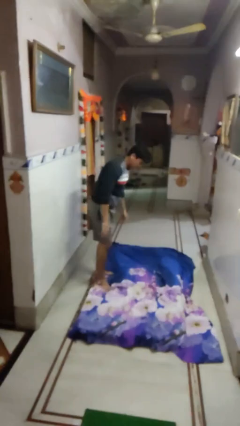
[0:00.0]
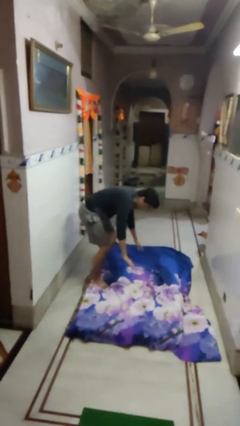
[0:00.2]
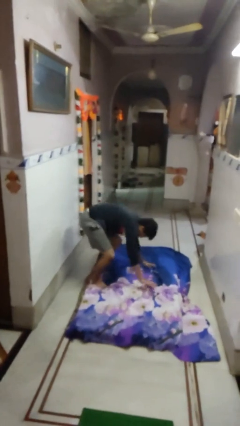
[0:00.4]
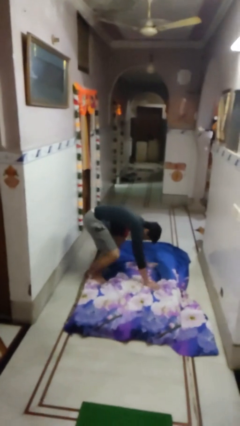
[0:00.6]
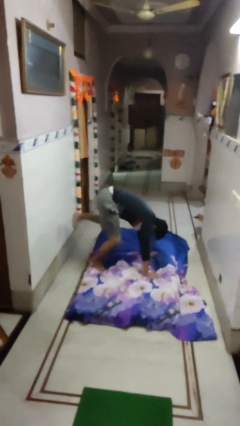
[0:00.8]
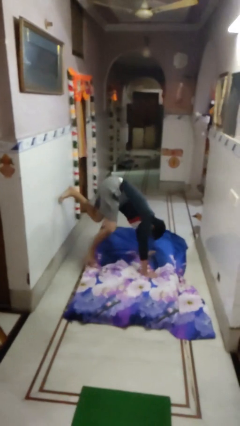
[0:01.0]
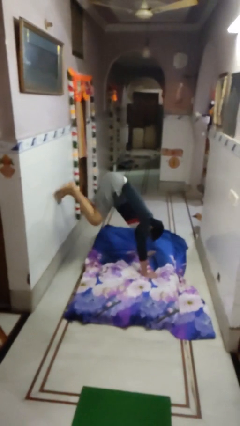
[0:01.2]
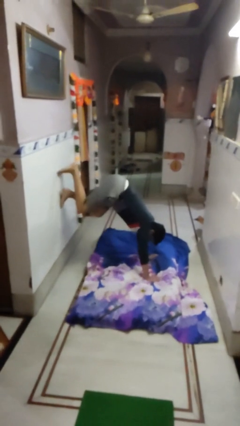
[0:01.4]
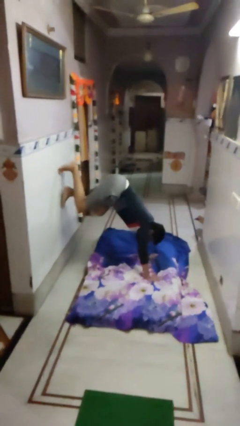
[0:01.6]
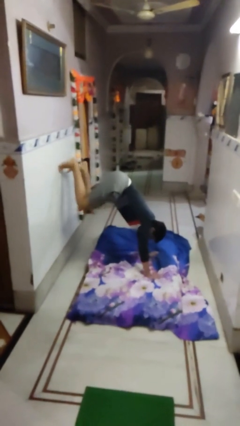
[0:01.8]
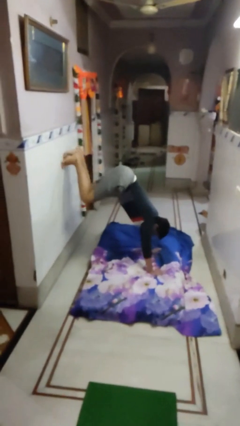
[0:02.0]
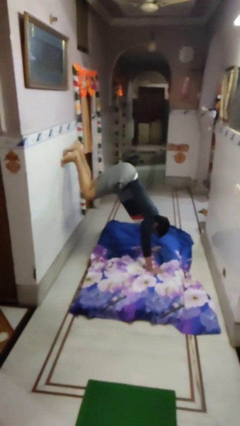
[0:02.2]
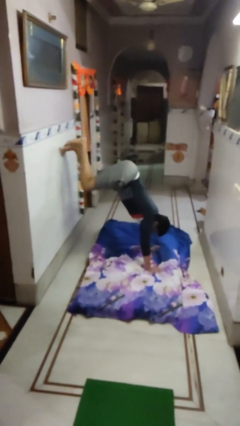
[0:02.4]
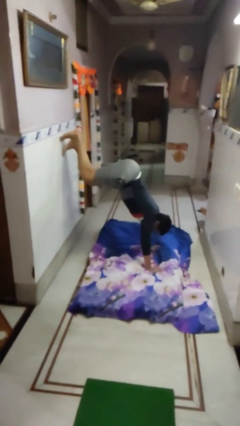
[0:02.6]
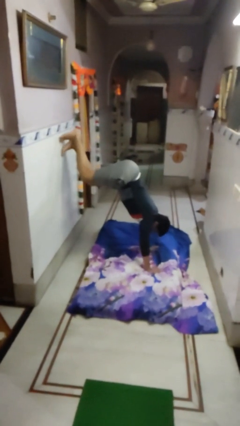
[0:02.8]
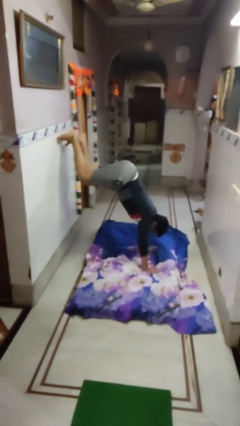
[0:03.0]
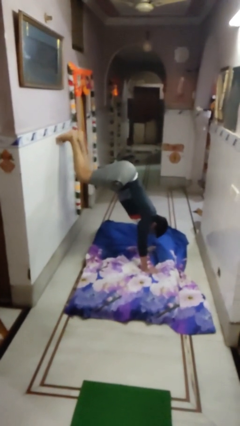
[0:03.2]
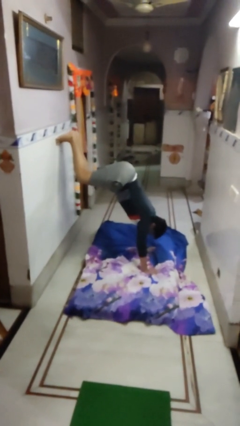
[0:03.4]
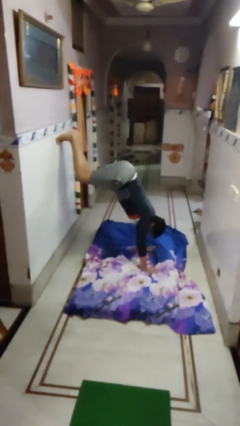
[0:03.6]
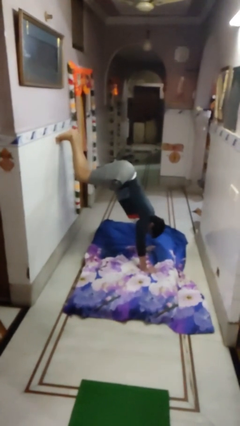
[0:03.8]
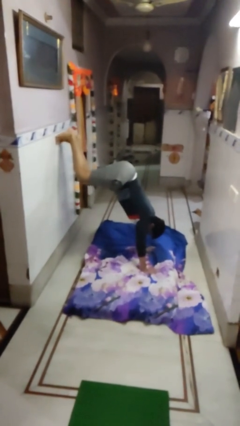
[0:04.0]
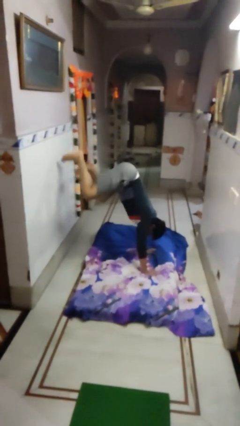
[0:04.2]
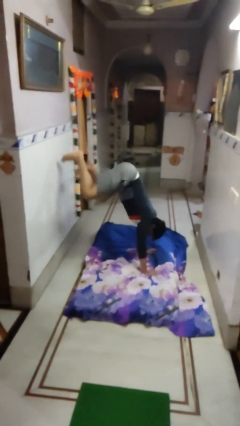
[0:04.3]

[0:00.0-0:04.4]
person handstand

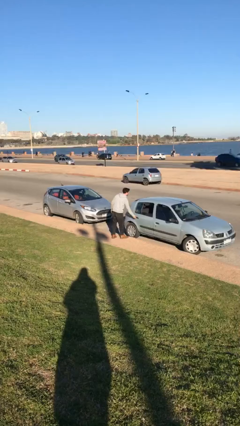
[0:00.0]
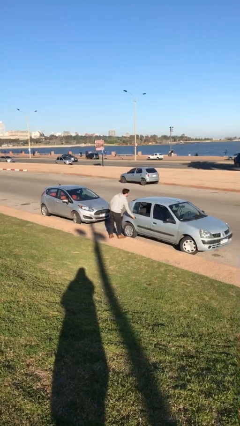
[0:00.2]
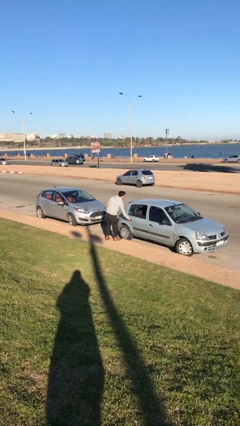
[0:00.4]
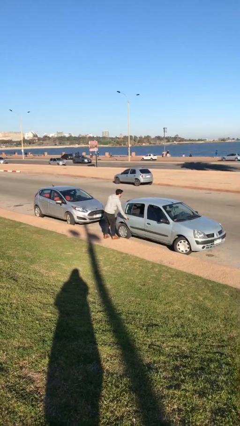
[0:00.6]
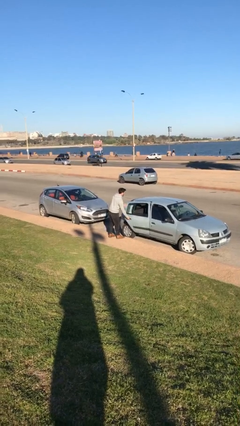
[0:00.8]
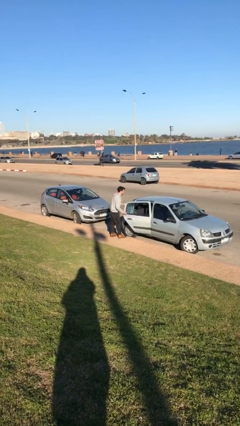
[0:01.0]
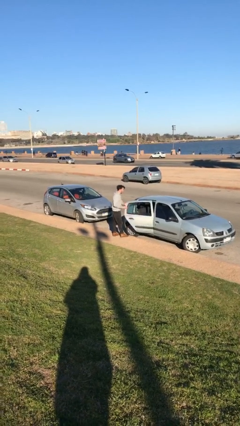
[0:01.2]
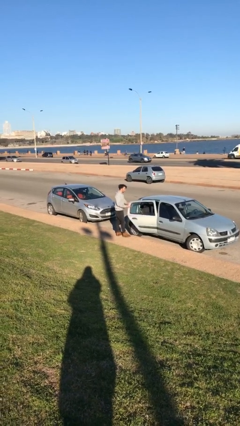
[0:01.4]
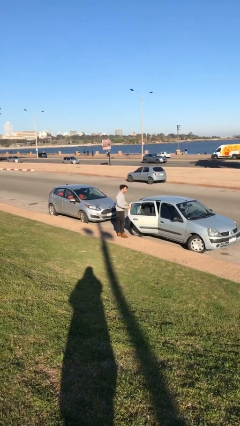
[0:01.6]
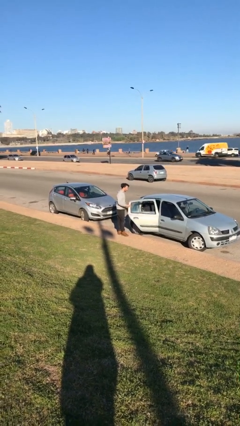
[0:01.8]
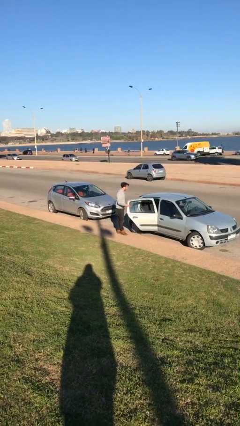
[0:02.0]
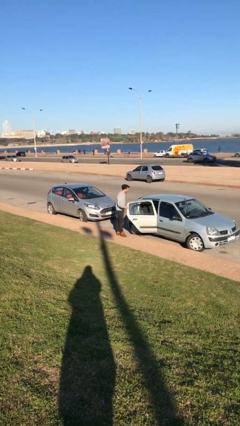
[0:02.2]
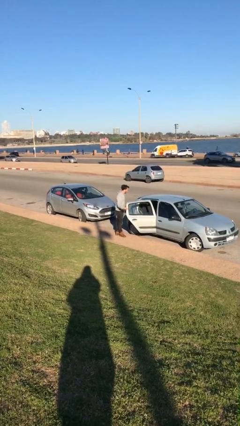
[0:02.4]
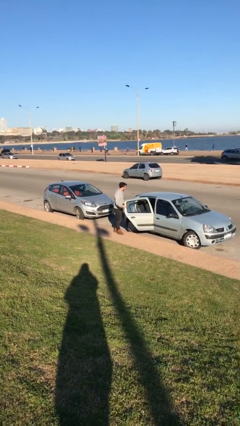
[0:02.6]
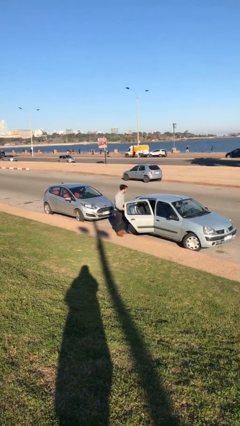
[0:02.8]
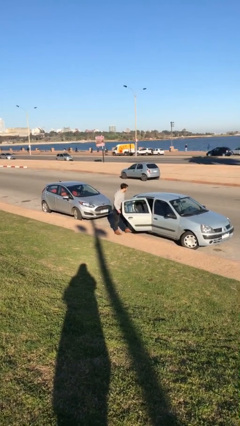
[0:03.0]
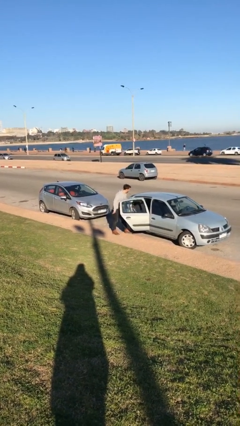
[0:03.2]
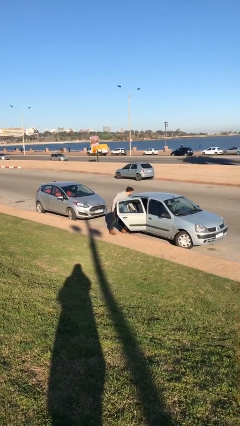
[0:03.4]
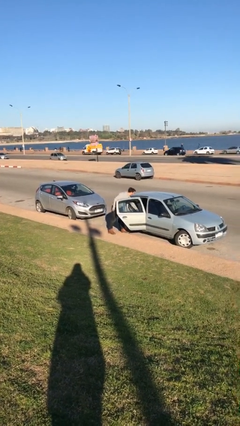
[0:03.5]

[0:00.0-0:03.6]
person opens car door

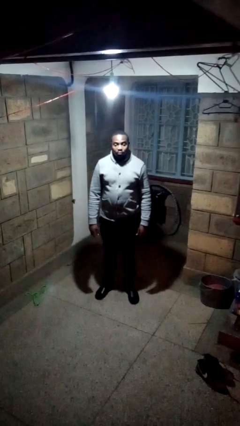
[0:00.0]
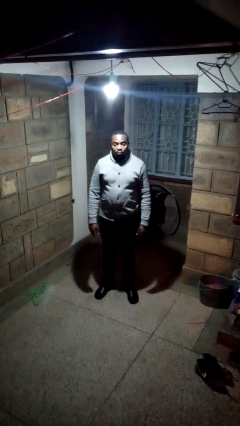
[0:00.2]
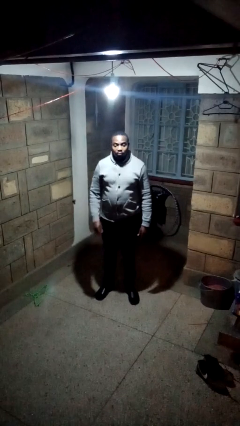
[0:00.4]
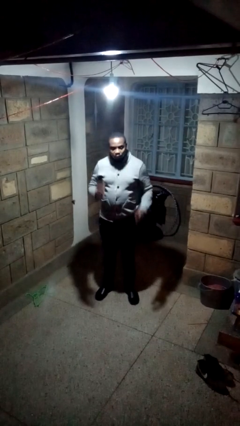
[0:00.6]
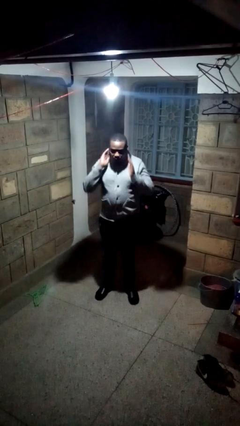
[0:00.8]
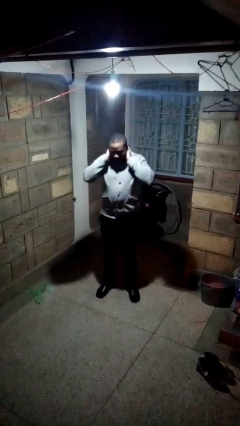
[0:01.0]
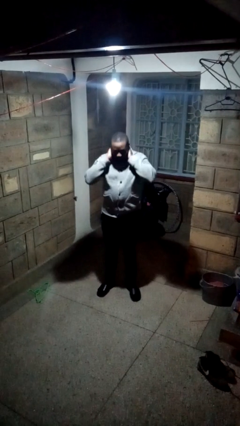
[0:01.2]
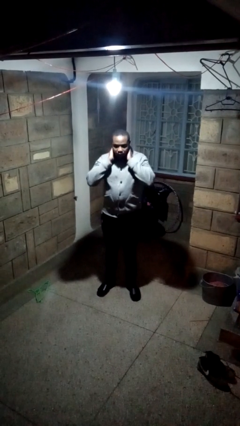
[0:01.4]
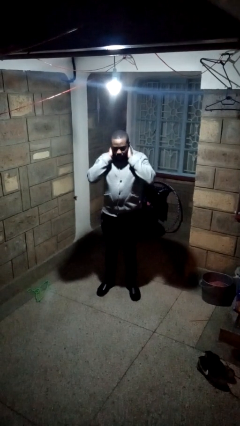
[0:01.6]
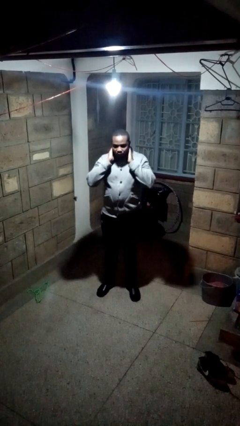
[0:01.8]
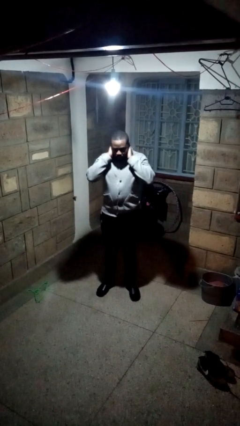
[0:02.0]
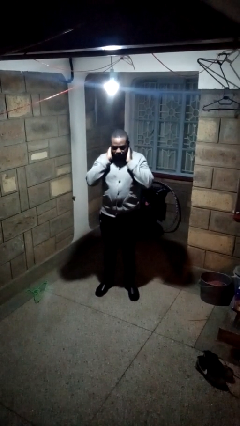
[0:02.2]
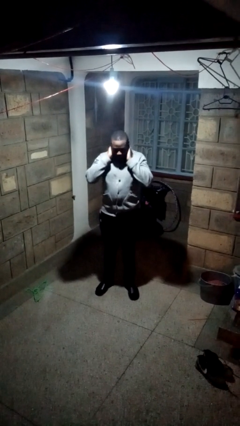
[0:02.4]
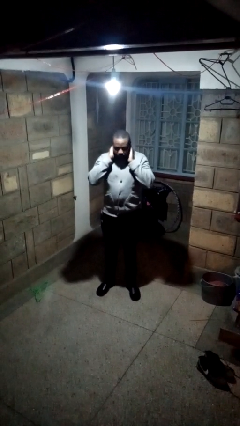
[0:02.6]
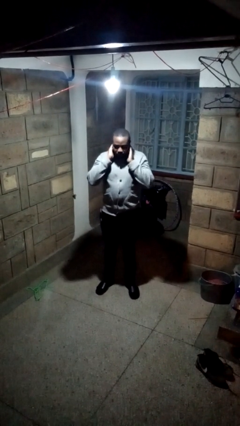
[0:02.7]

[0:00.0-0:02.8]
person rubs neck

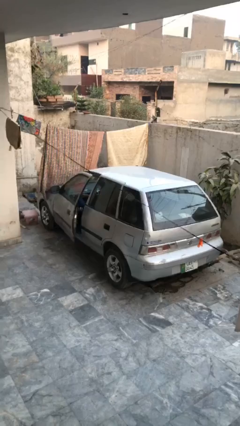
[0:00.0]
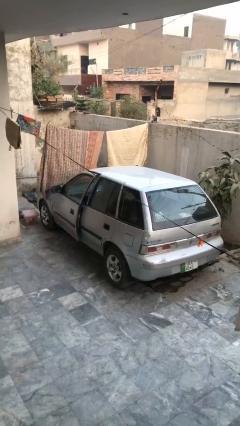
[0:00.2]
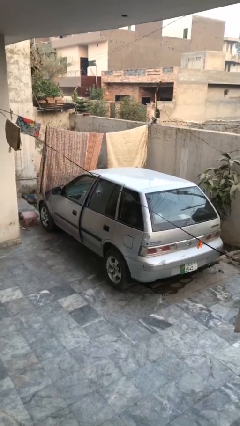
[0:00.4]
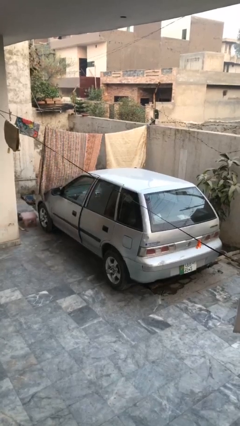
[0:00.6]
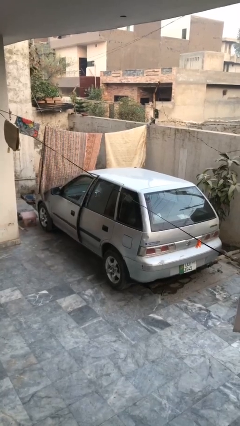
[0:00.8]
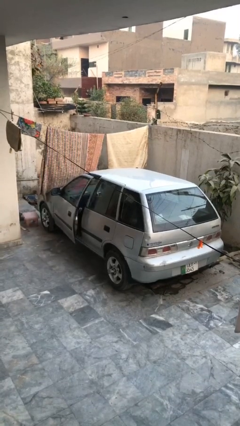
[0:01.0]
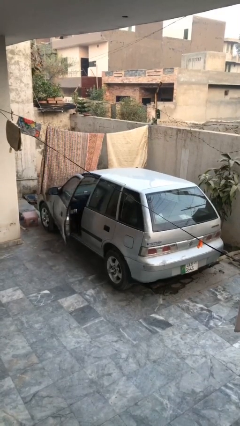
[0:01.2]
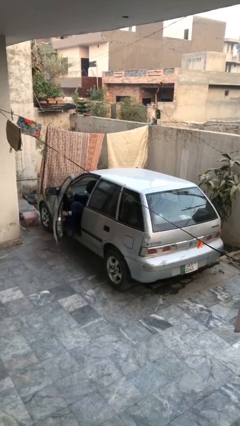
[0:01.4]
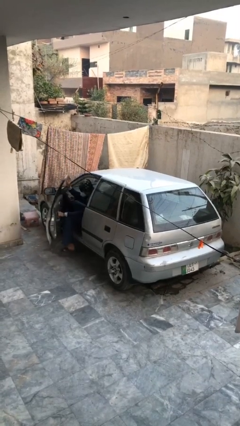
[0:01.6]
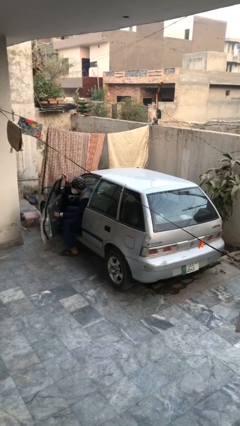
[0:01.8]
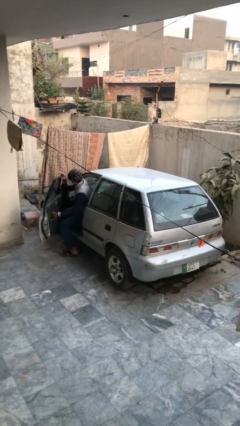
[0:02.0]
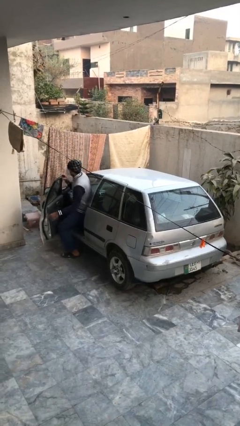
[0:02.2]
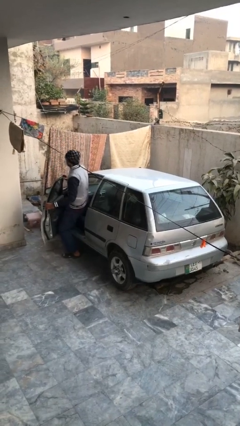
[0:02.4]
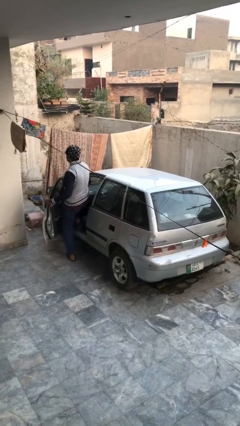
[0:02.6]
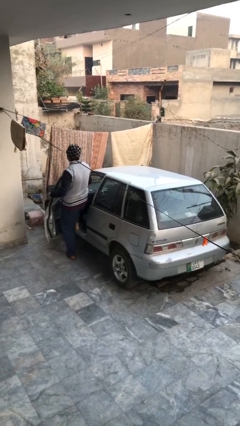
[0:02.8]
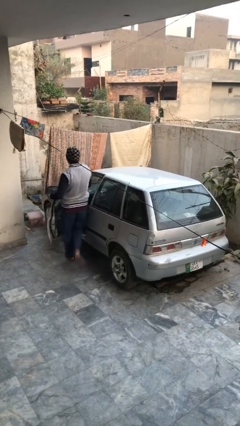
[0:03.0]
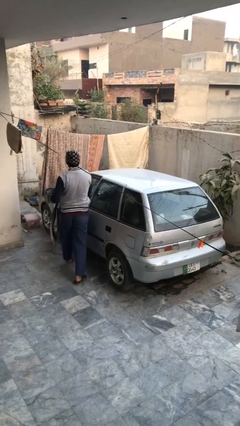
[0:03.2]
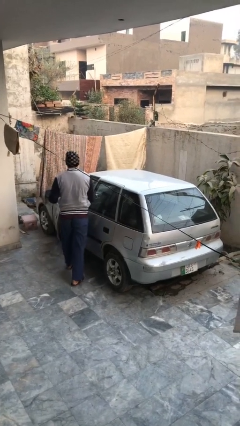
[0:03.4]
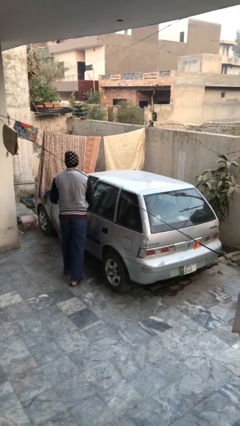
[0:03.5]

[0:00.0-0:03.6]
car drops off person

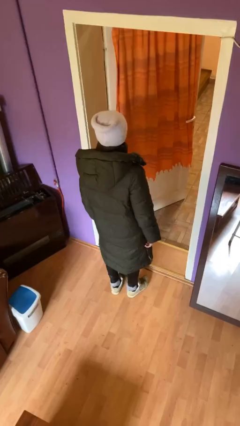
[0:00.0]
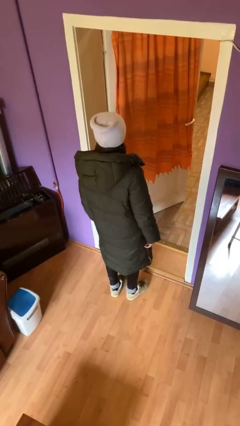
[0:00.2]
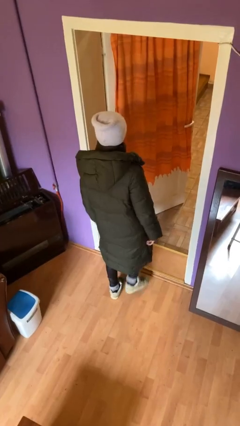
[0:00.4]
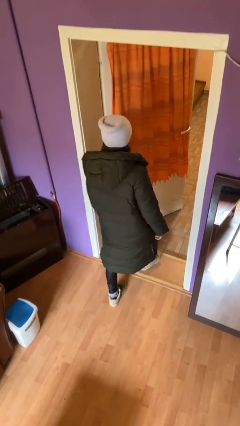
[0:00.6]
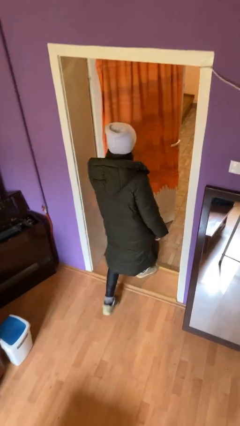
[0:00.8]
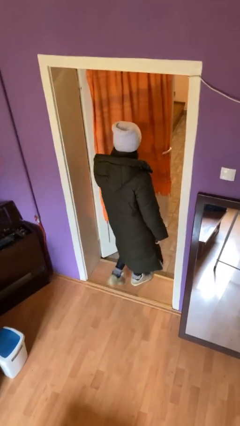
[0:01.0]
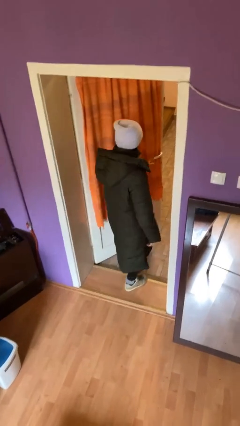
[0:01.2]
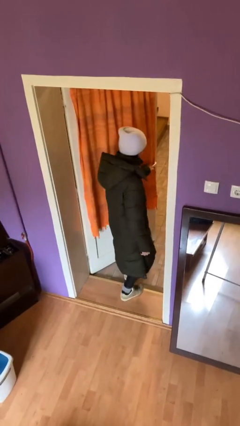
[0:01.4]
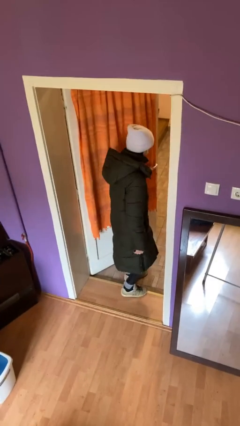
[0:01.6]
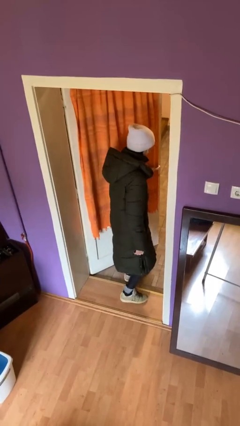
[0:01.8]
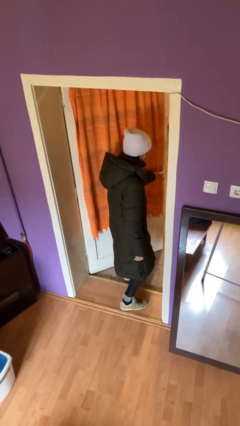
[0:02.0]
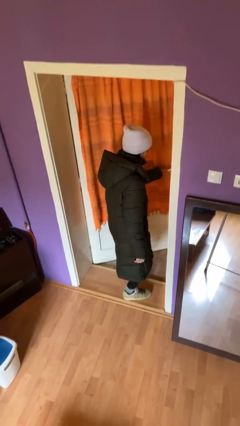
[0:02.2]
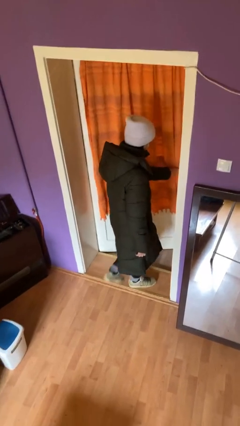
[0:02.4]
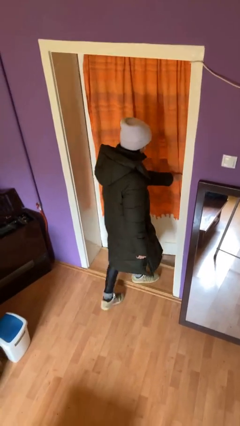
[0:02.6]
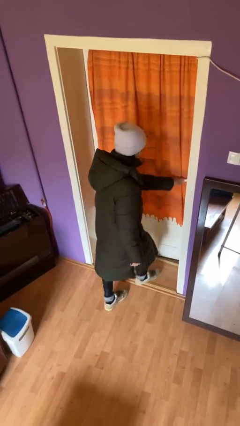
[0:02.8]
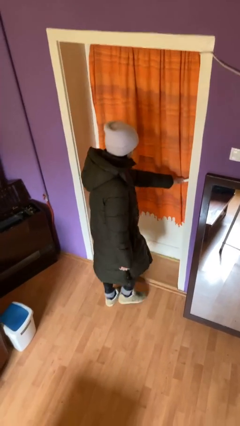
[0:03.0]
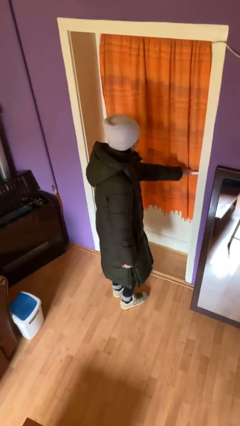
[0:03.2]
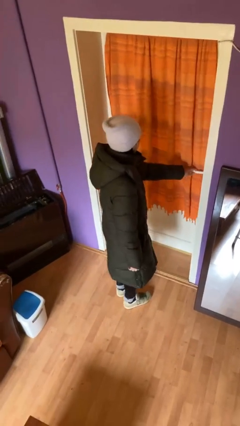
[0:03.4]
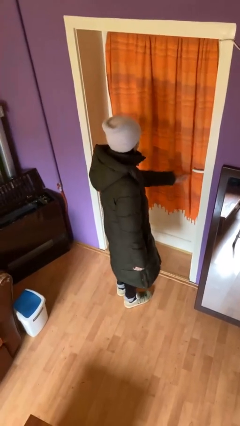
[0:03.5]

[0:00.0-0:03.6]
person closes facility door
